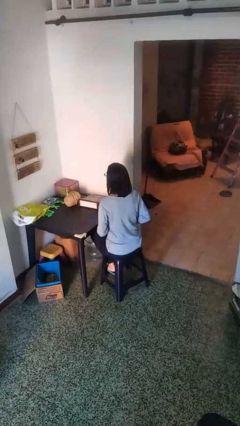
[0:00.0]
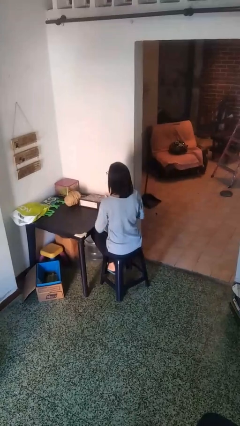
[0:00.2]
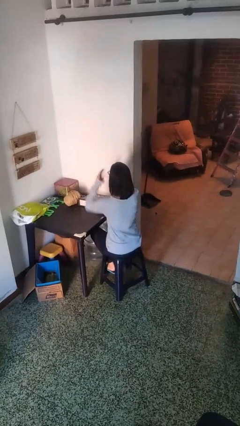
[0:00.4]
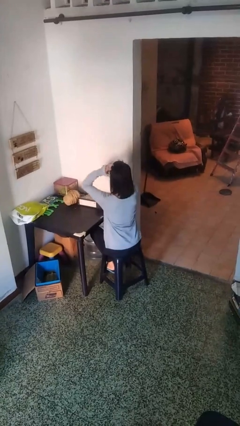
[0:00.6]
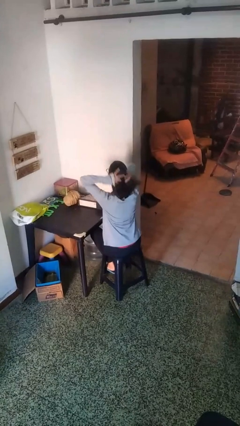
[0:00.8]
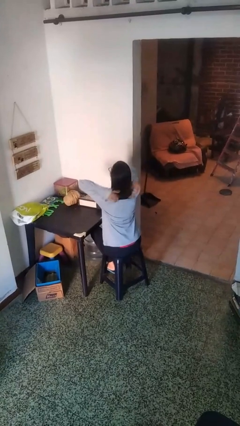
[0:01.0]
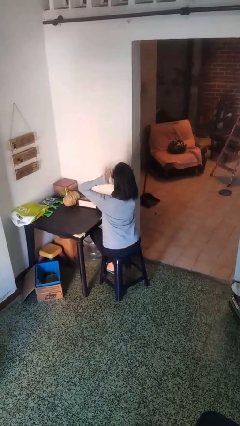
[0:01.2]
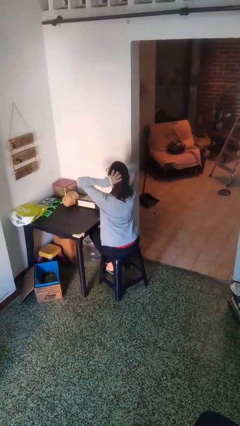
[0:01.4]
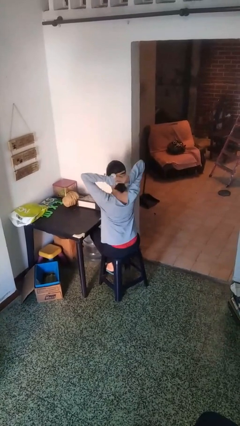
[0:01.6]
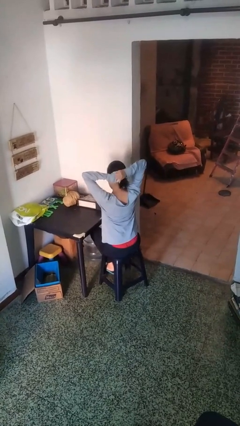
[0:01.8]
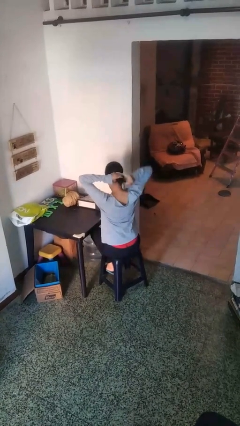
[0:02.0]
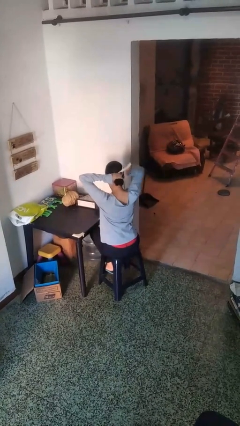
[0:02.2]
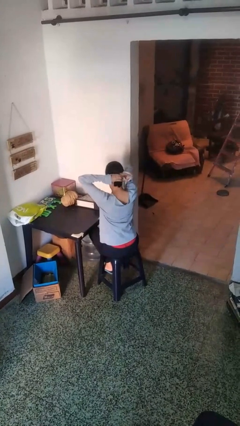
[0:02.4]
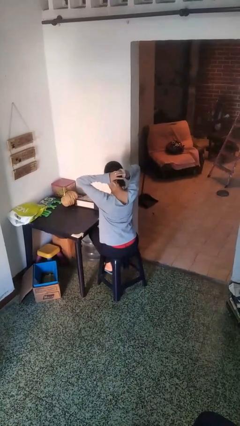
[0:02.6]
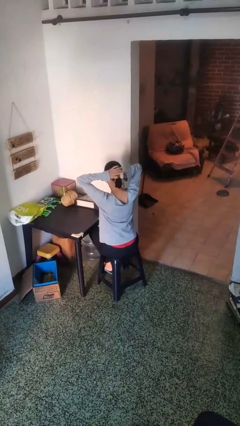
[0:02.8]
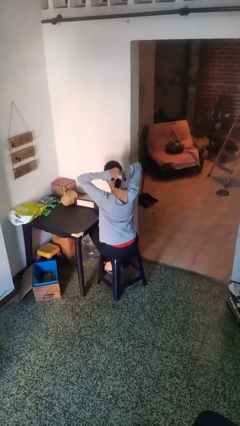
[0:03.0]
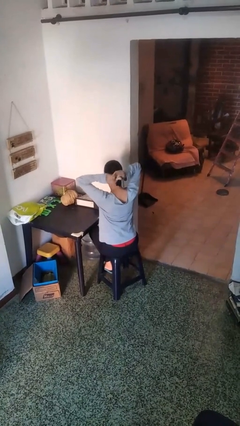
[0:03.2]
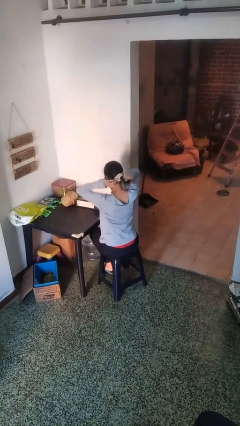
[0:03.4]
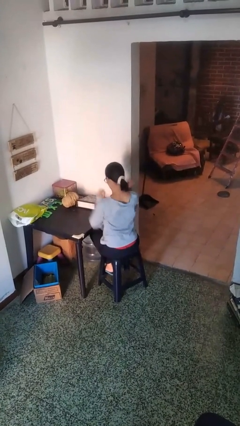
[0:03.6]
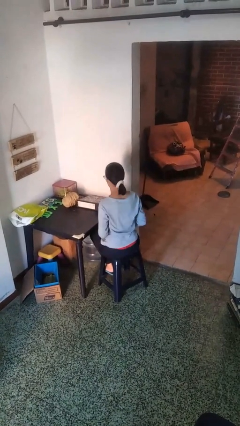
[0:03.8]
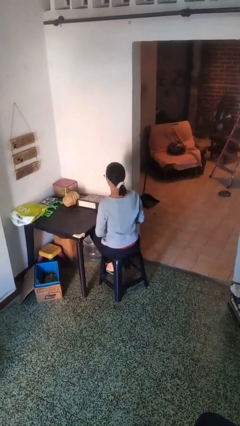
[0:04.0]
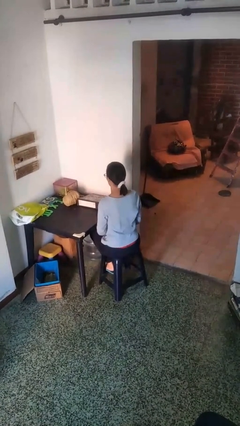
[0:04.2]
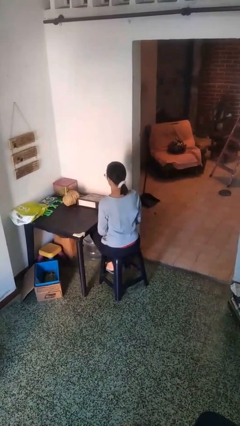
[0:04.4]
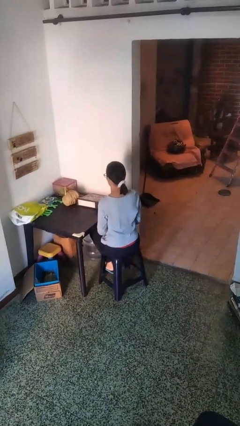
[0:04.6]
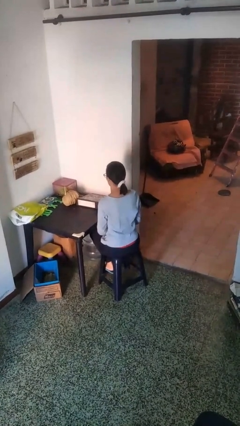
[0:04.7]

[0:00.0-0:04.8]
person puts hair in ponytail

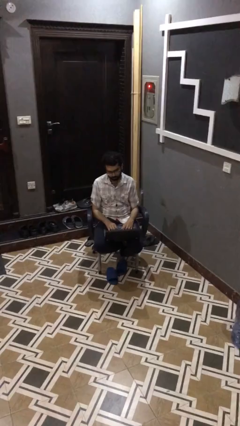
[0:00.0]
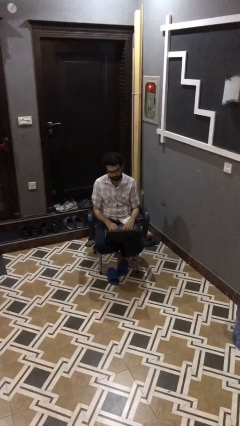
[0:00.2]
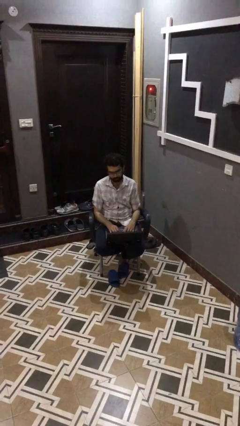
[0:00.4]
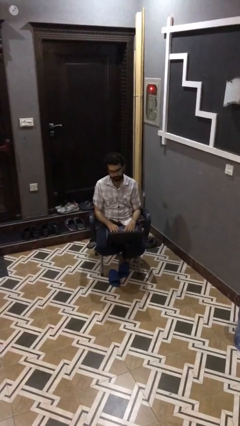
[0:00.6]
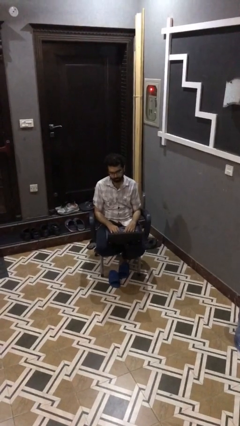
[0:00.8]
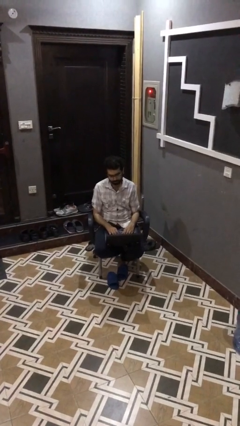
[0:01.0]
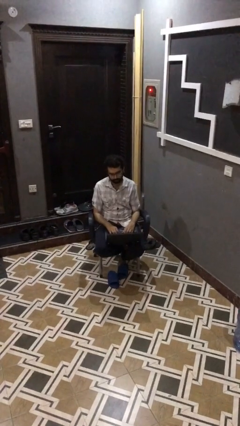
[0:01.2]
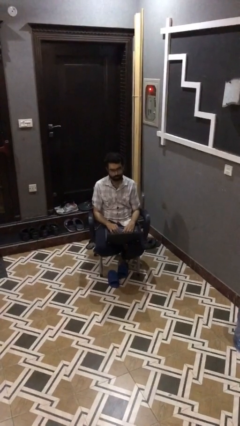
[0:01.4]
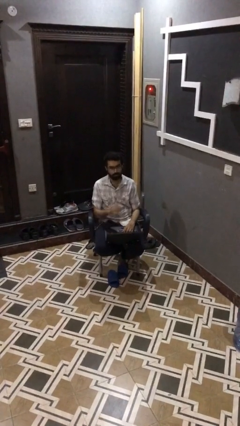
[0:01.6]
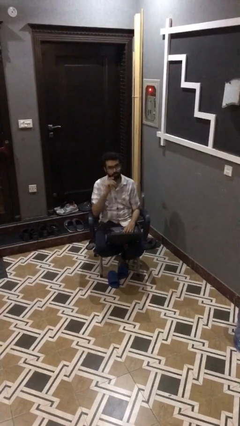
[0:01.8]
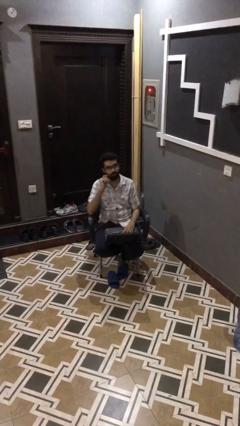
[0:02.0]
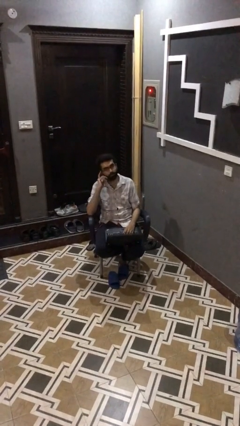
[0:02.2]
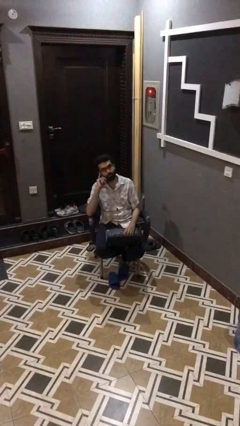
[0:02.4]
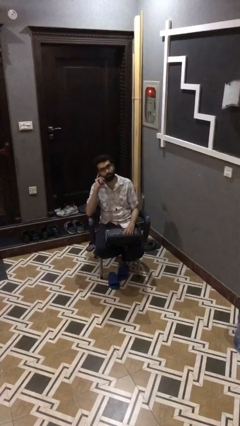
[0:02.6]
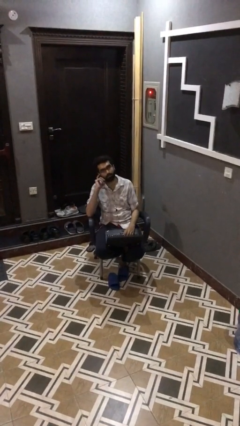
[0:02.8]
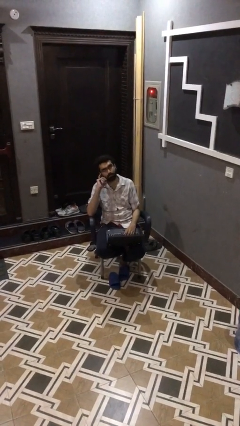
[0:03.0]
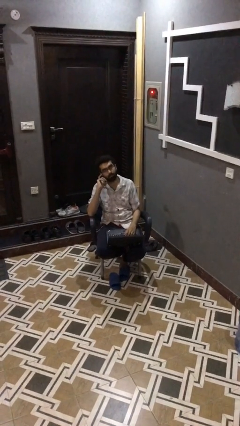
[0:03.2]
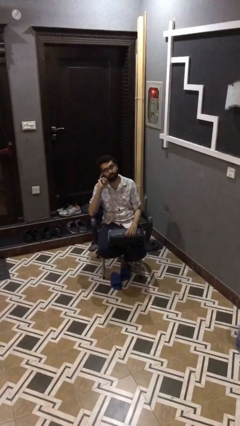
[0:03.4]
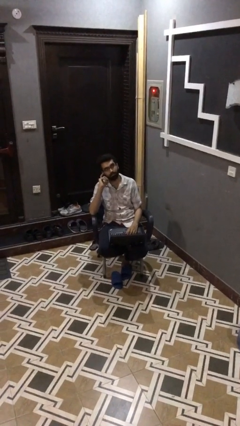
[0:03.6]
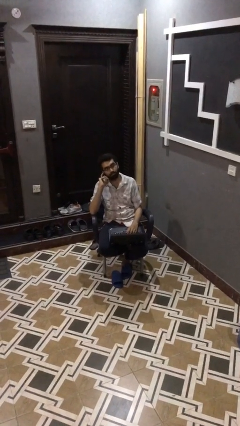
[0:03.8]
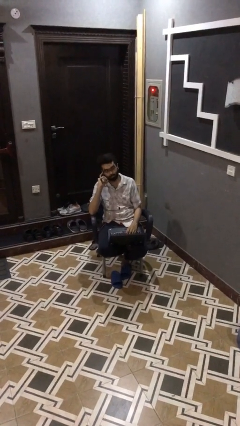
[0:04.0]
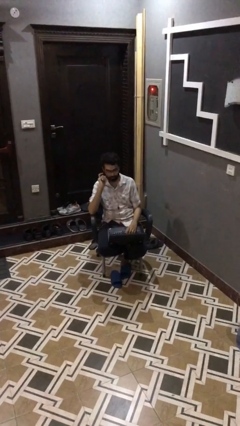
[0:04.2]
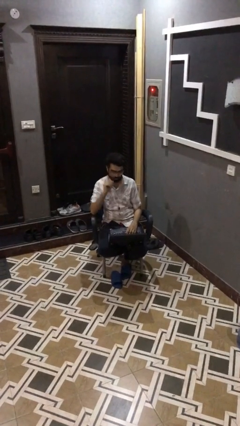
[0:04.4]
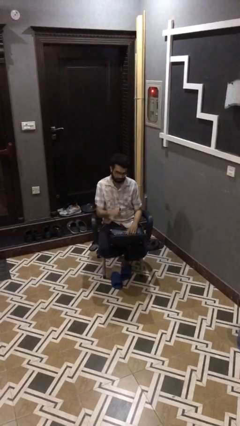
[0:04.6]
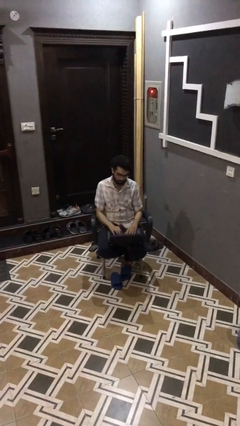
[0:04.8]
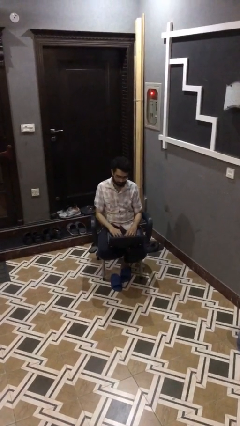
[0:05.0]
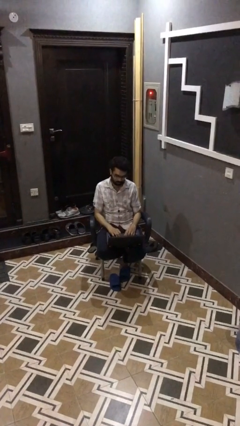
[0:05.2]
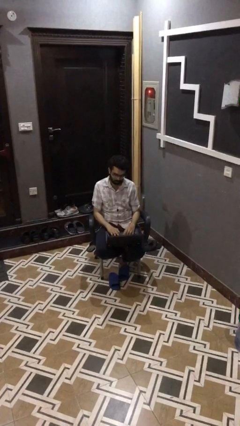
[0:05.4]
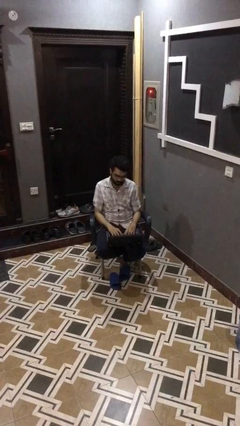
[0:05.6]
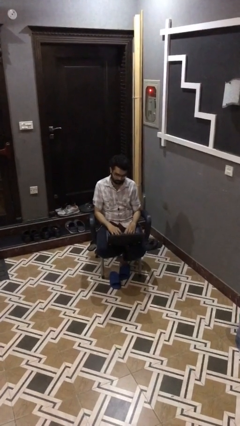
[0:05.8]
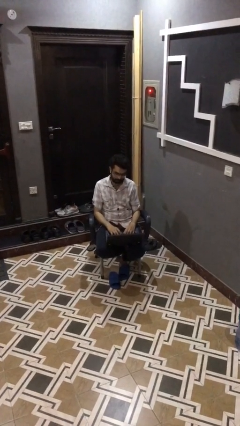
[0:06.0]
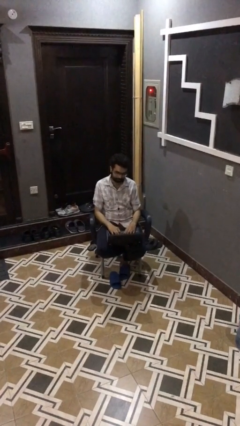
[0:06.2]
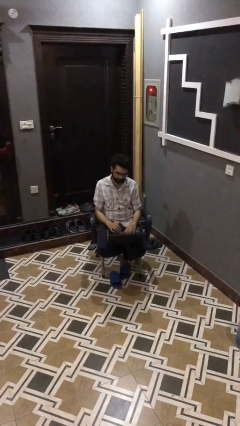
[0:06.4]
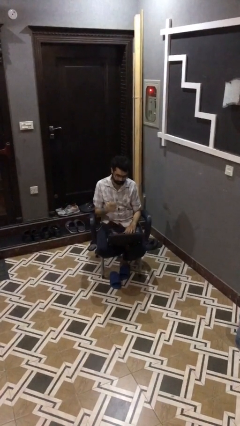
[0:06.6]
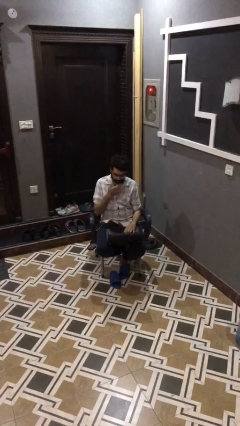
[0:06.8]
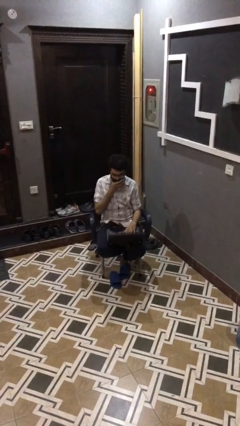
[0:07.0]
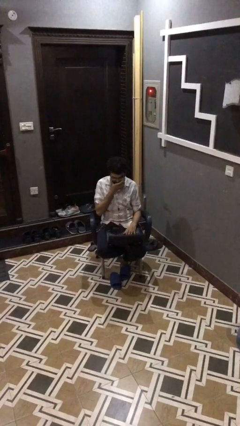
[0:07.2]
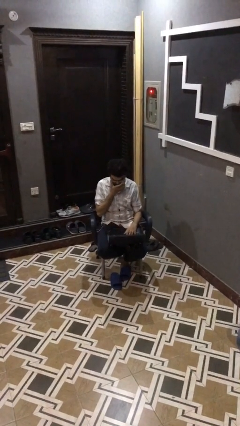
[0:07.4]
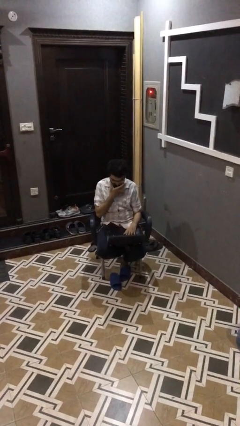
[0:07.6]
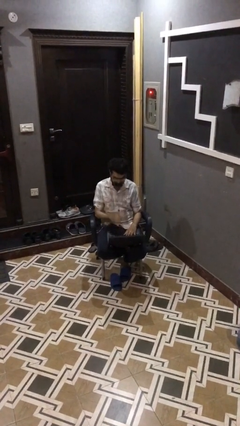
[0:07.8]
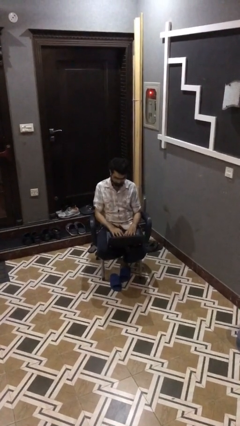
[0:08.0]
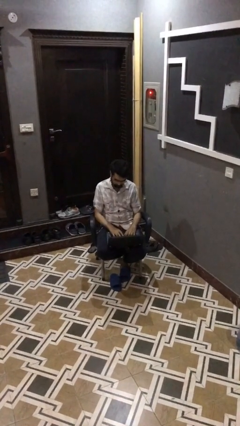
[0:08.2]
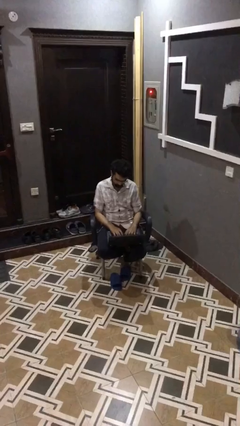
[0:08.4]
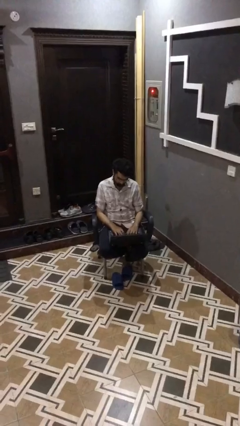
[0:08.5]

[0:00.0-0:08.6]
person interacts with laptop

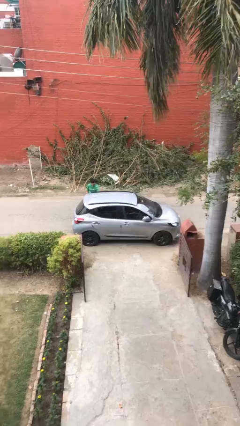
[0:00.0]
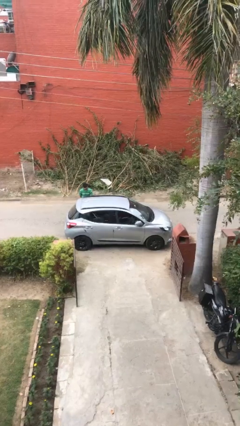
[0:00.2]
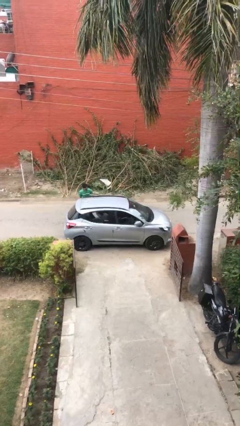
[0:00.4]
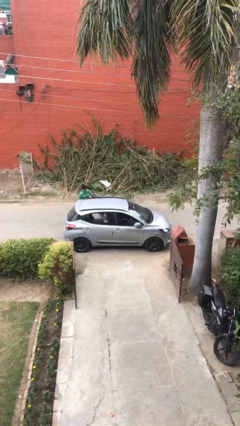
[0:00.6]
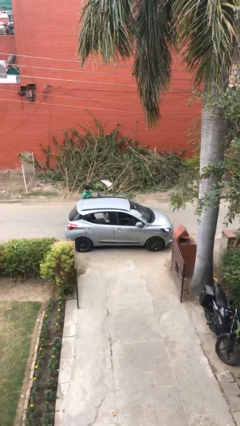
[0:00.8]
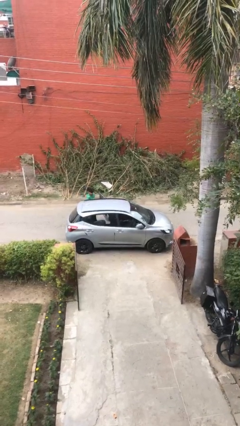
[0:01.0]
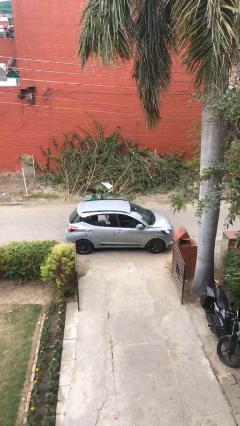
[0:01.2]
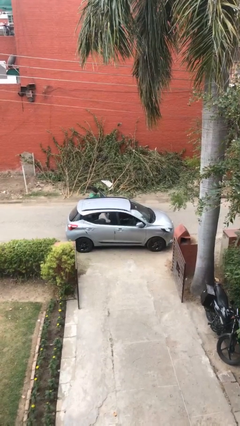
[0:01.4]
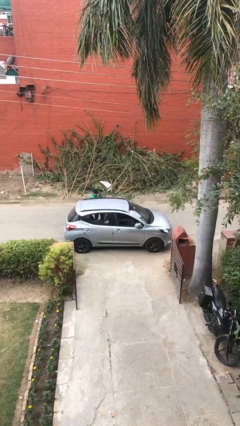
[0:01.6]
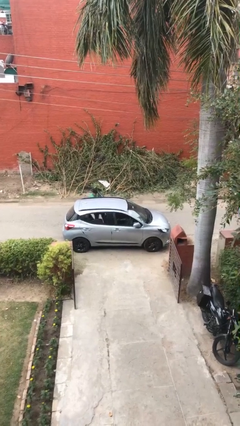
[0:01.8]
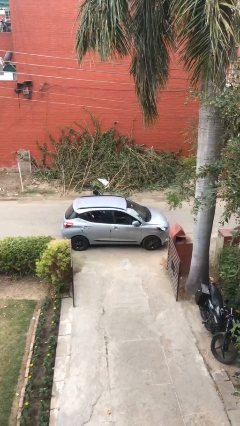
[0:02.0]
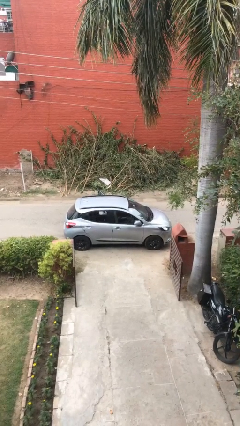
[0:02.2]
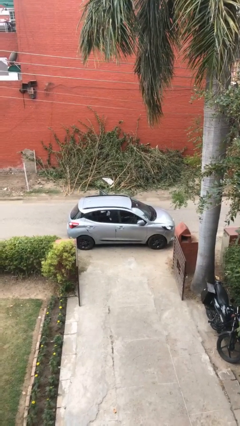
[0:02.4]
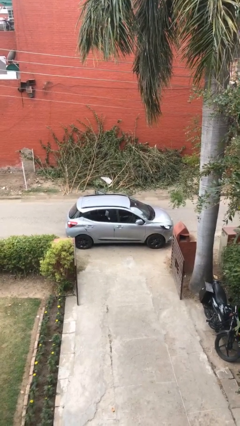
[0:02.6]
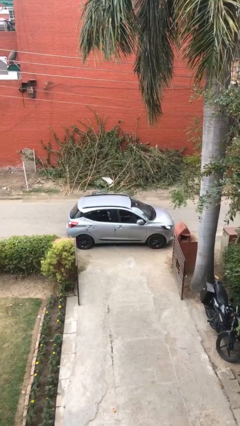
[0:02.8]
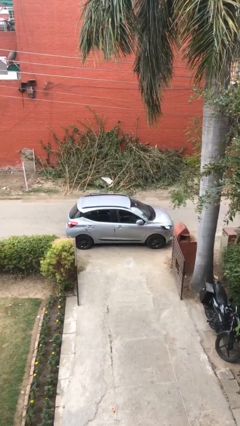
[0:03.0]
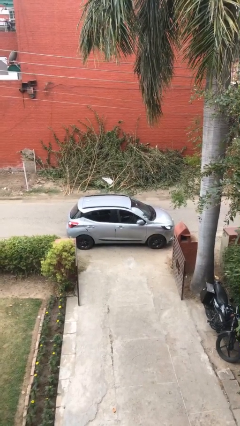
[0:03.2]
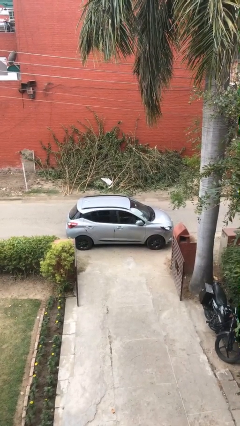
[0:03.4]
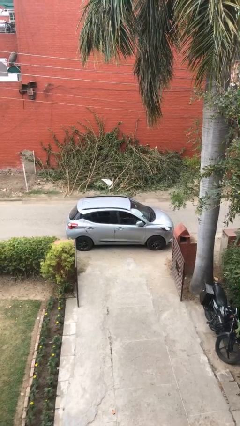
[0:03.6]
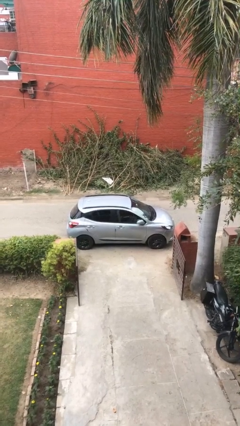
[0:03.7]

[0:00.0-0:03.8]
car picks up person

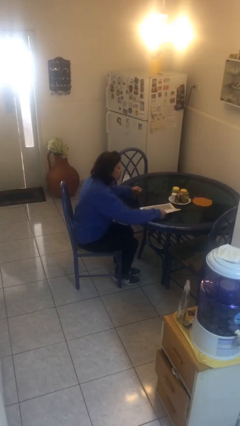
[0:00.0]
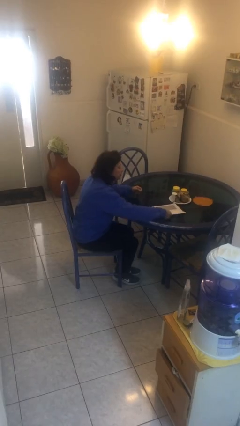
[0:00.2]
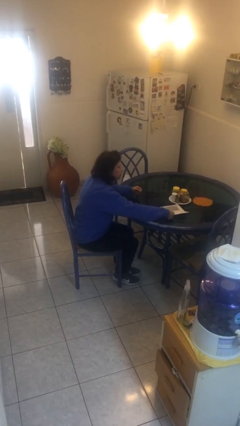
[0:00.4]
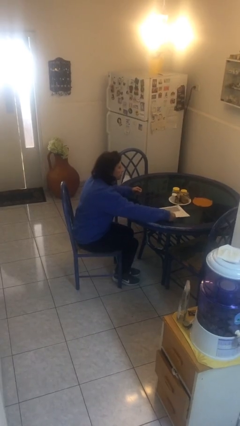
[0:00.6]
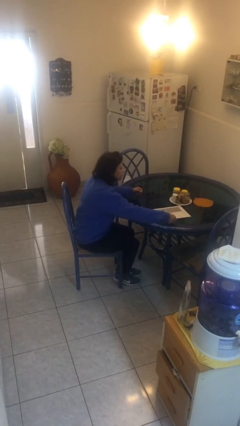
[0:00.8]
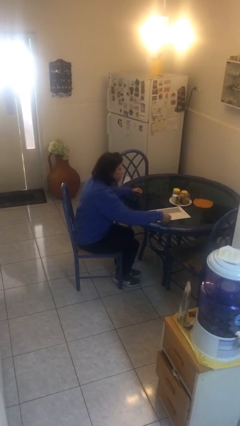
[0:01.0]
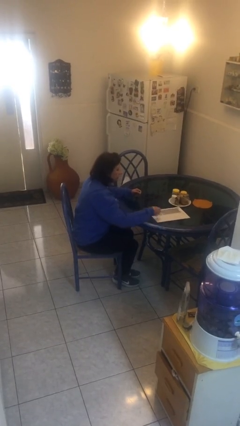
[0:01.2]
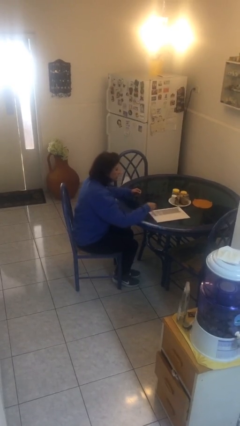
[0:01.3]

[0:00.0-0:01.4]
person puts down object on table
